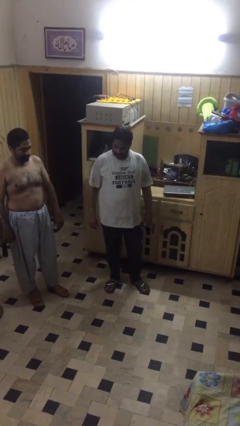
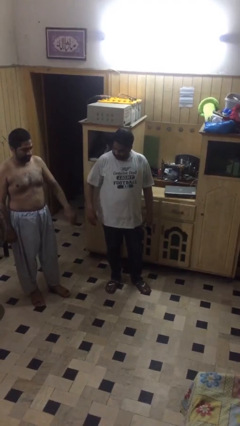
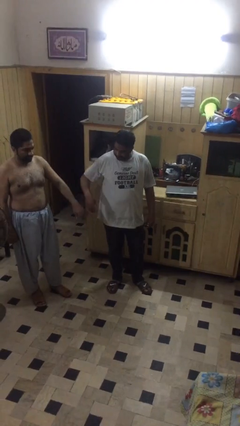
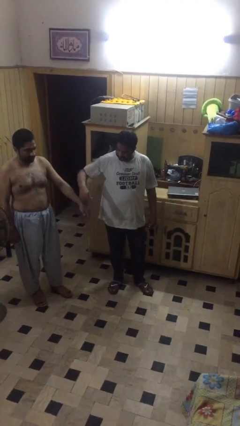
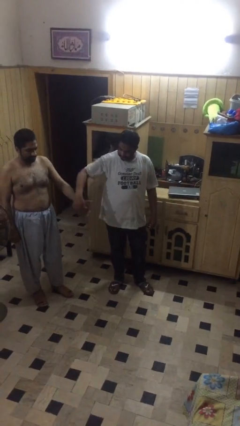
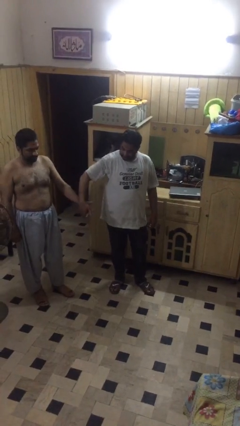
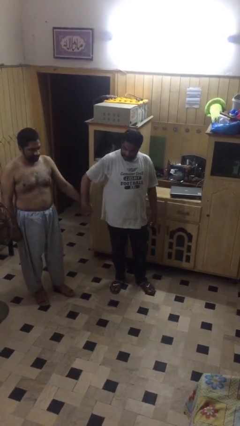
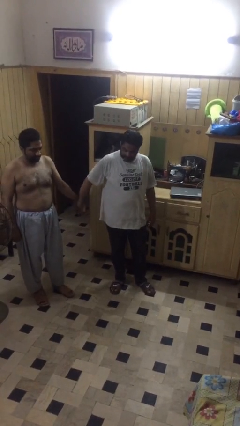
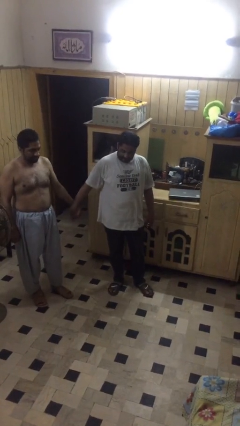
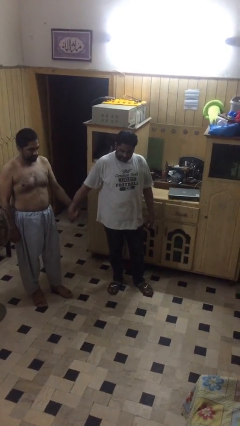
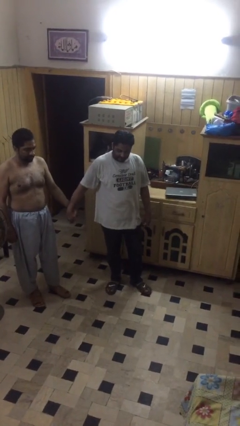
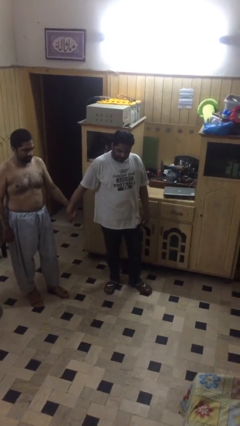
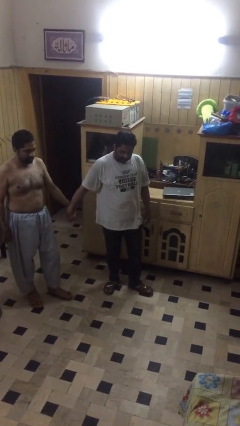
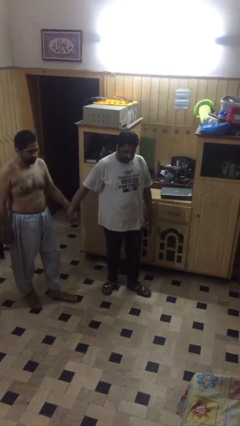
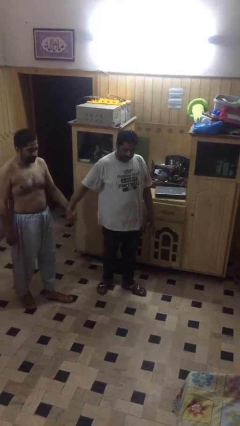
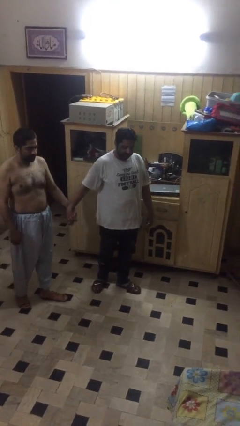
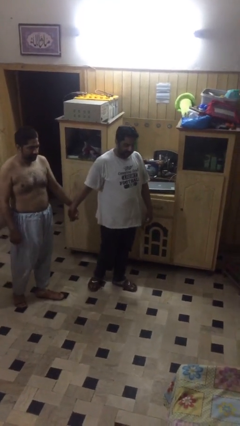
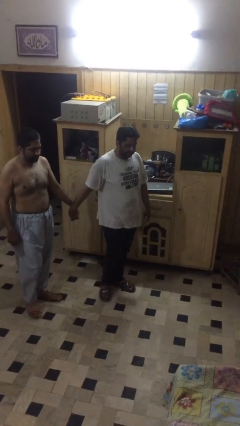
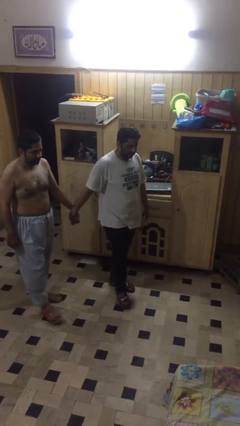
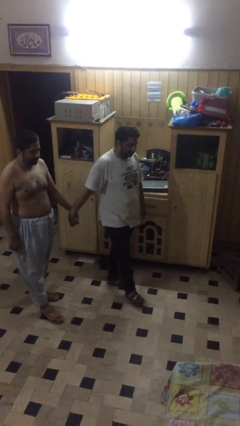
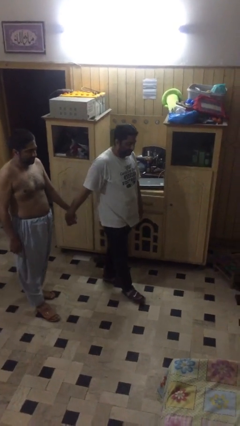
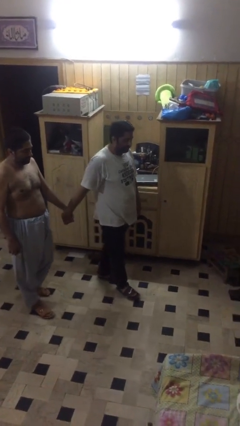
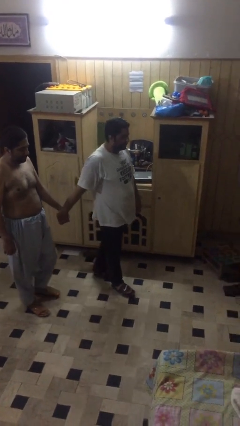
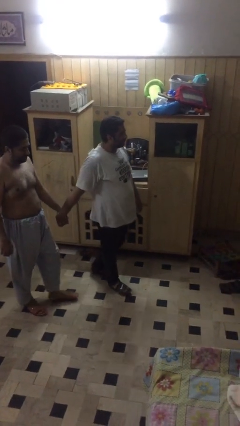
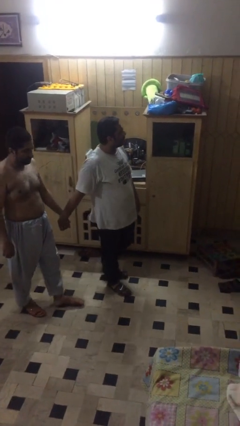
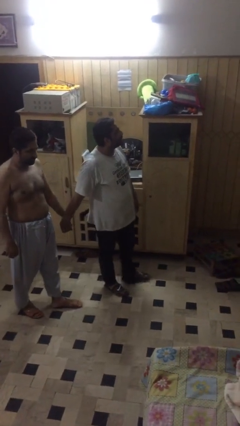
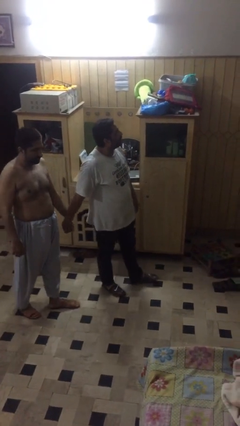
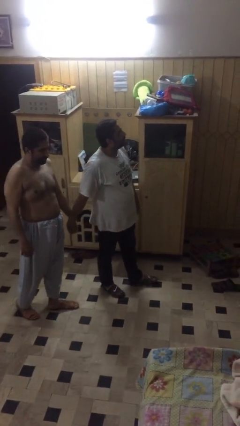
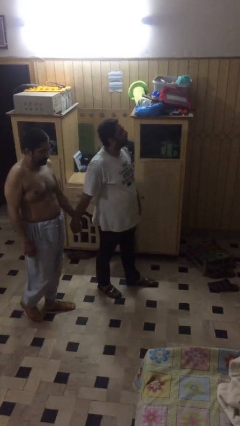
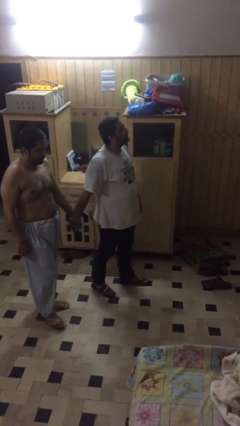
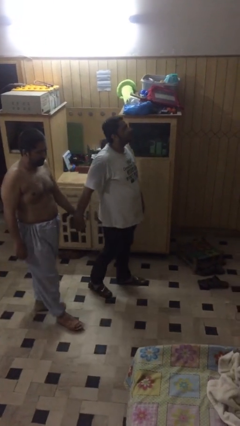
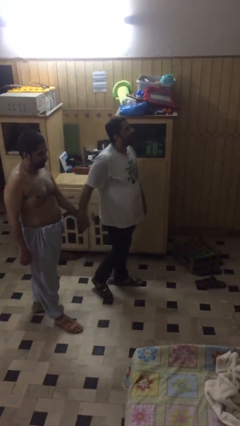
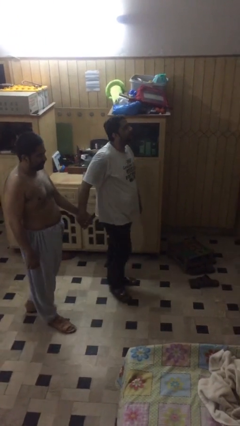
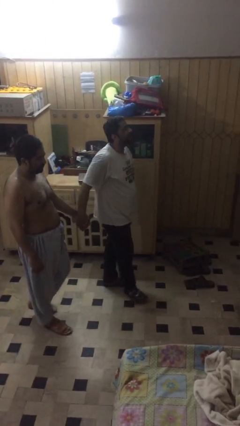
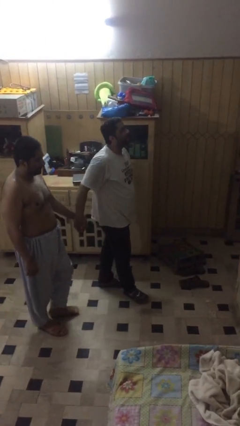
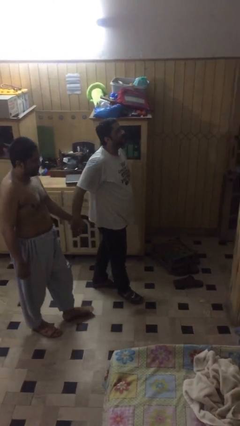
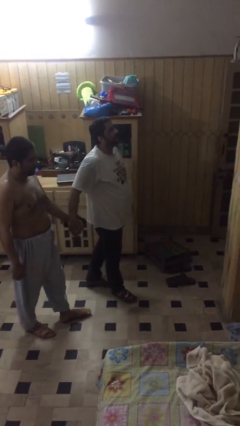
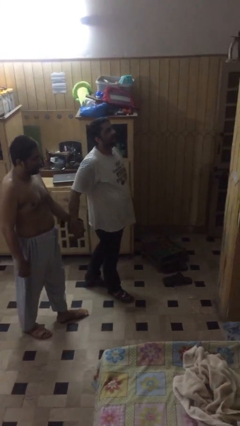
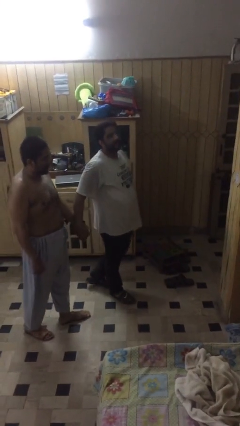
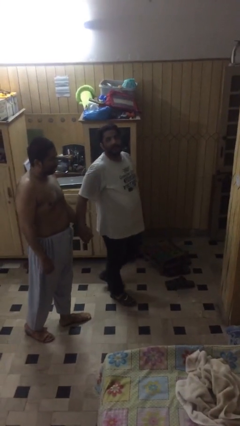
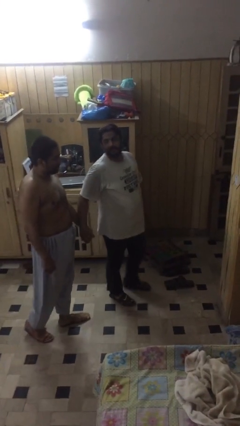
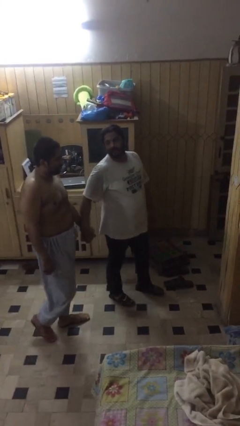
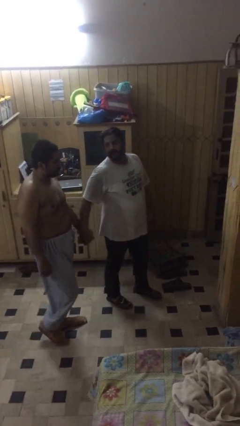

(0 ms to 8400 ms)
person holds hand

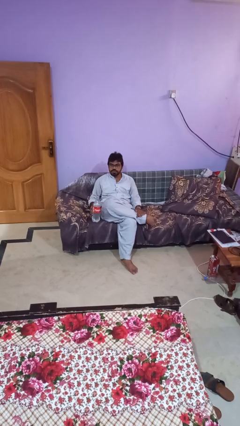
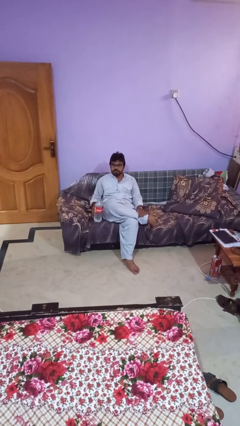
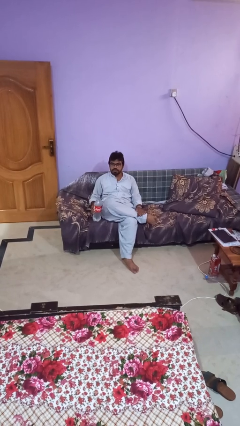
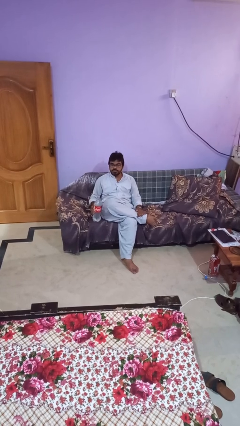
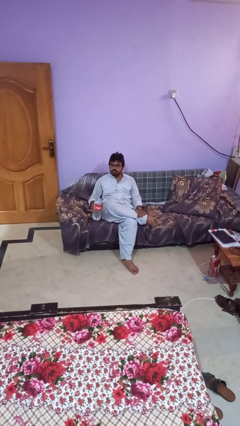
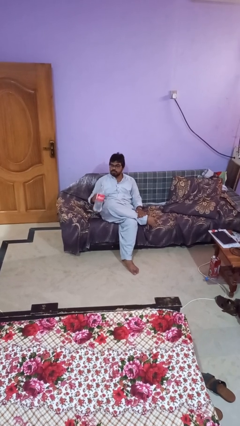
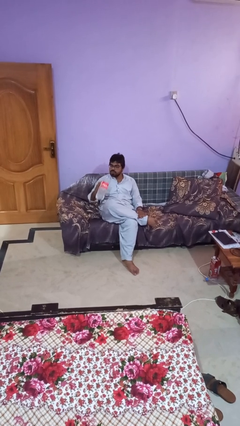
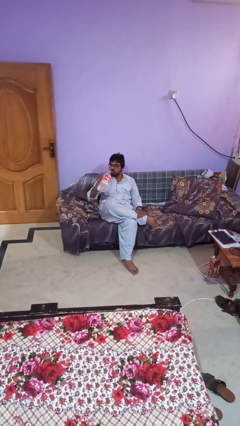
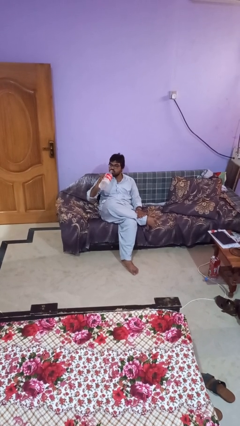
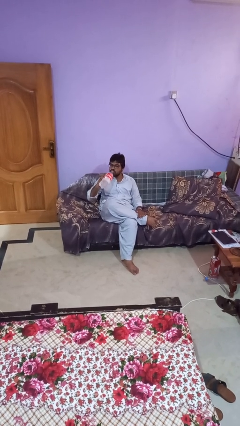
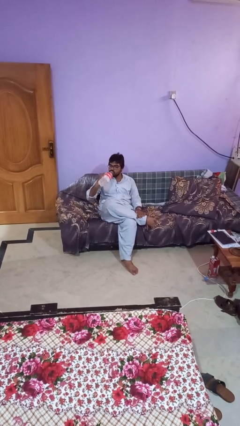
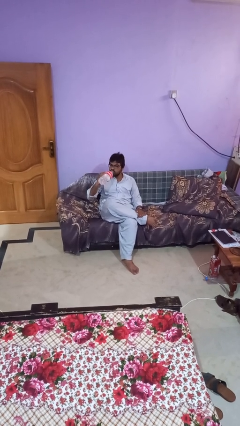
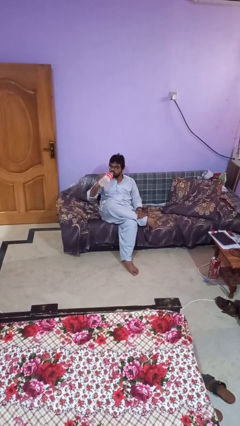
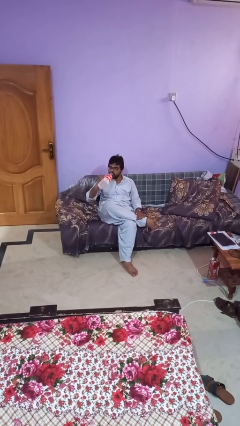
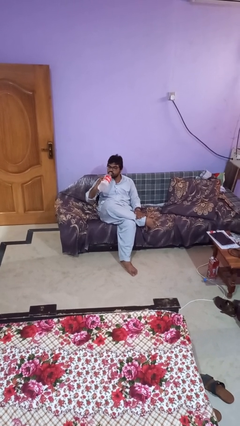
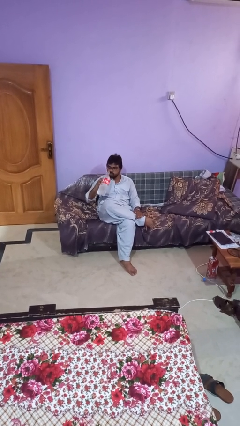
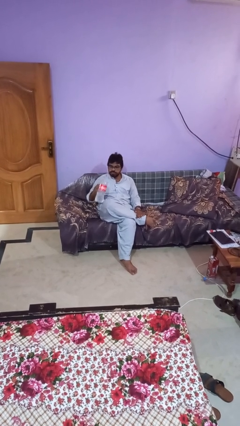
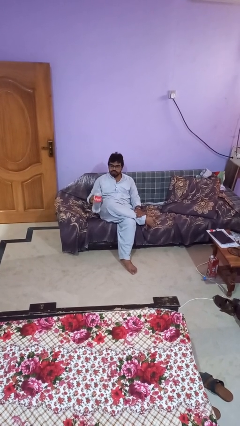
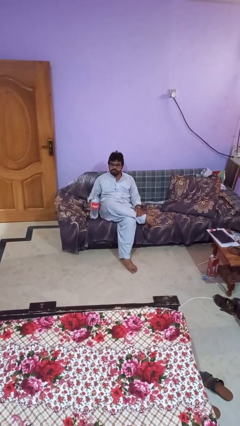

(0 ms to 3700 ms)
person drinks from bottle

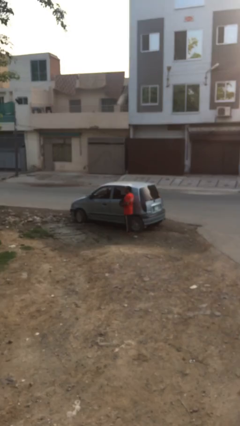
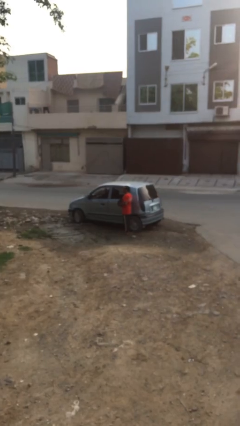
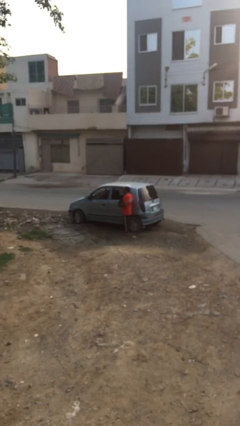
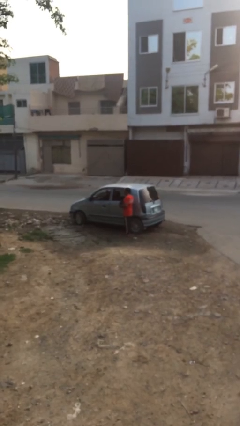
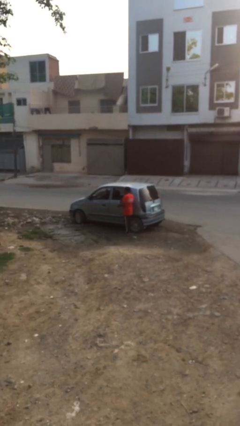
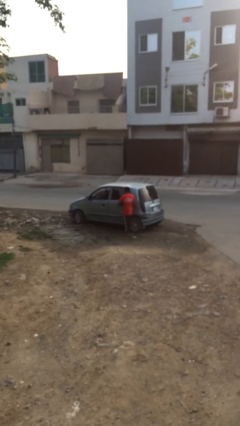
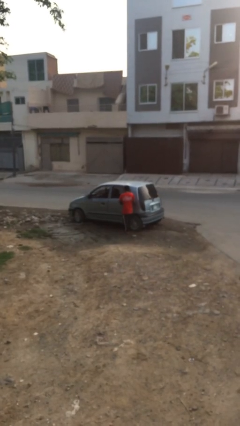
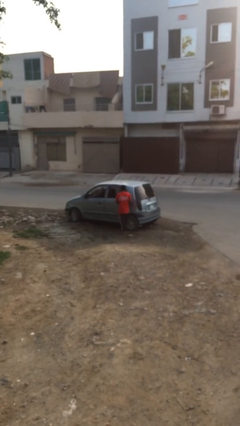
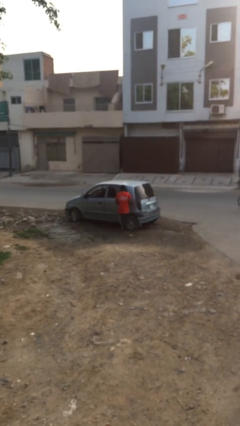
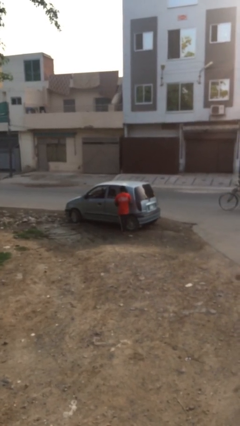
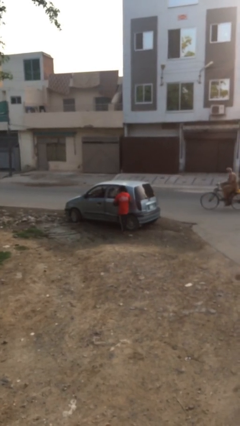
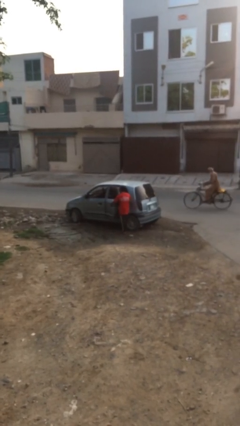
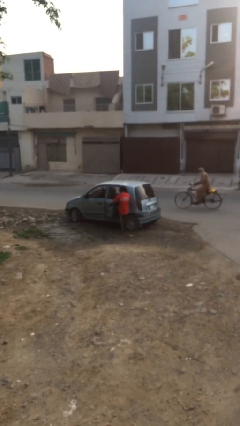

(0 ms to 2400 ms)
person opens car door

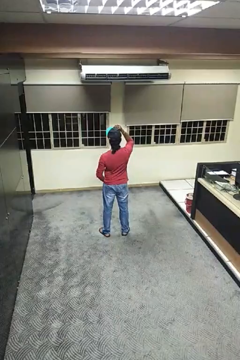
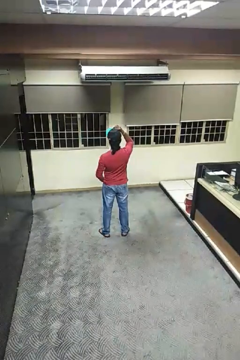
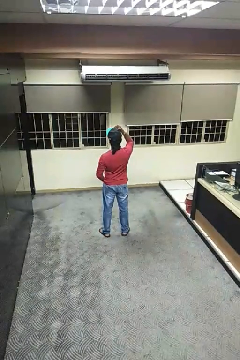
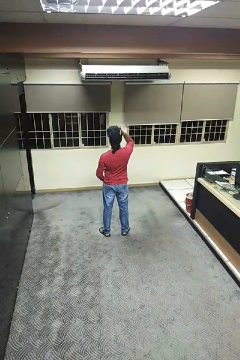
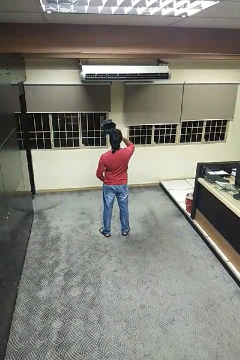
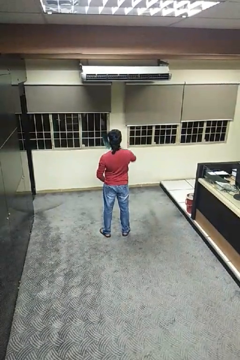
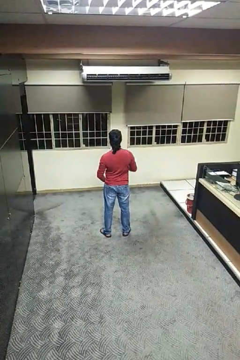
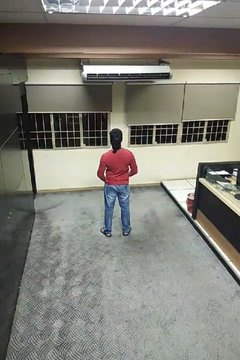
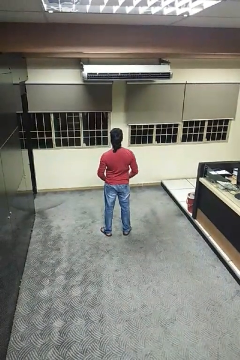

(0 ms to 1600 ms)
person takes off hat

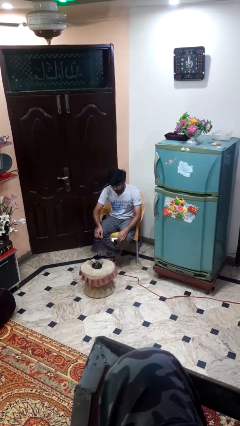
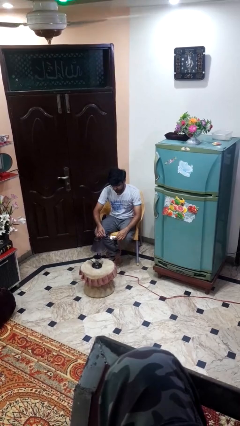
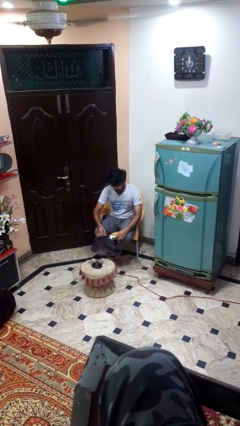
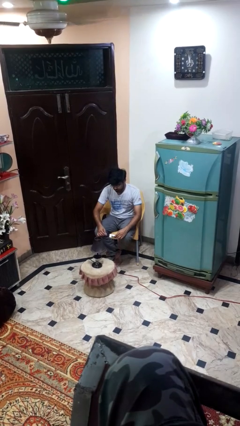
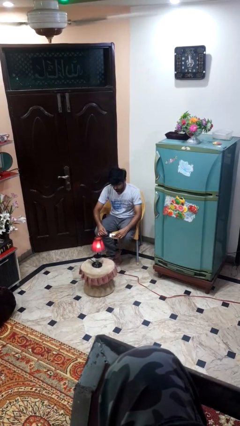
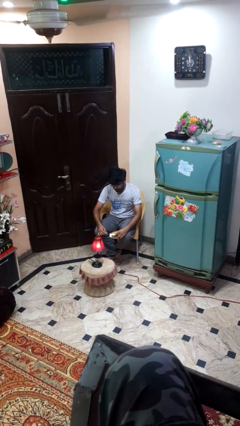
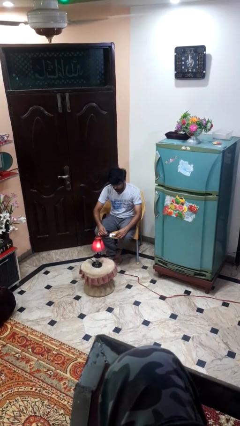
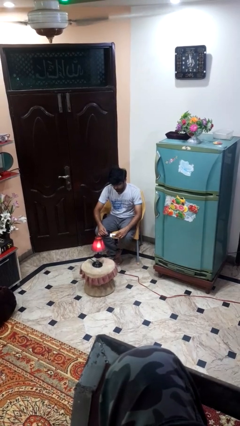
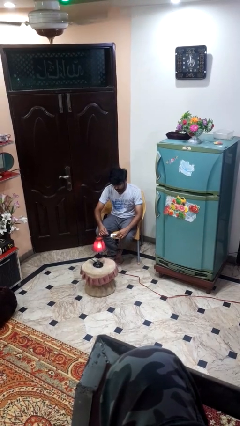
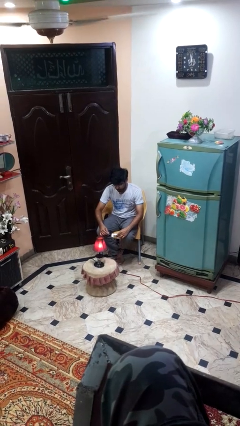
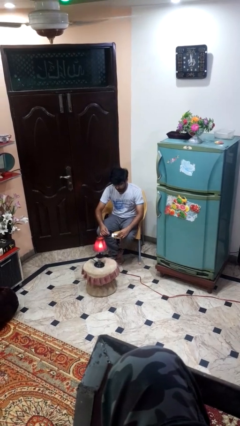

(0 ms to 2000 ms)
person turns on lamp
